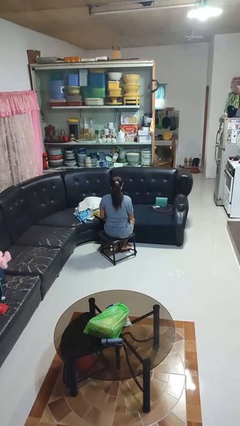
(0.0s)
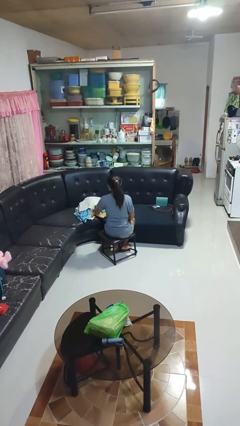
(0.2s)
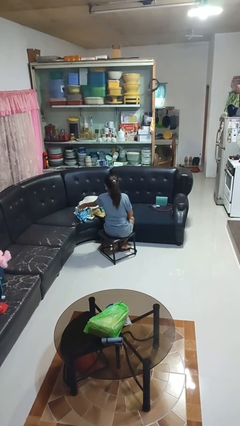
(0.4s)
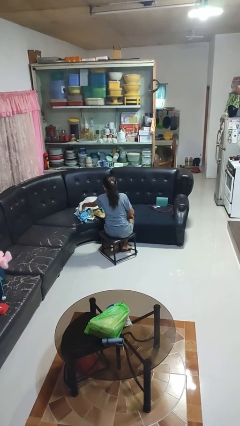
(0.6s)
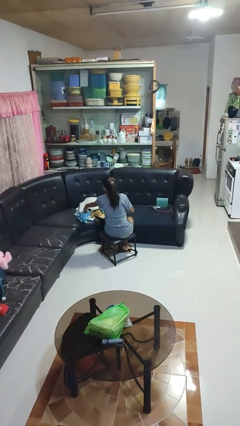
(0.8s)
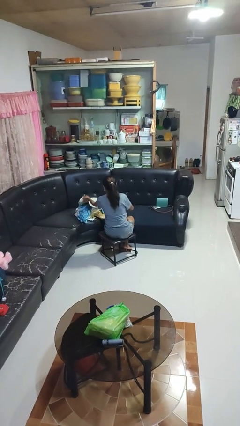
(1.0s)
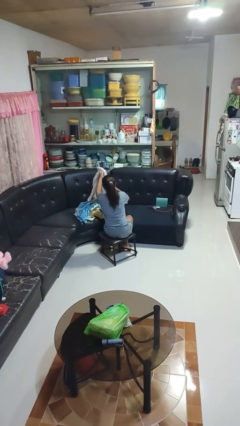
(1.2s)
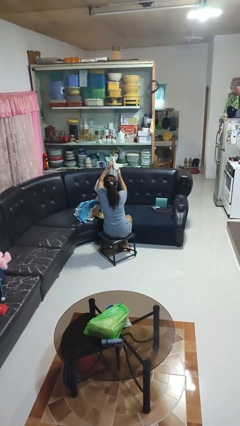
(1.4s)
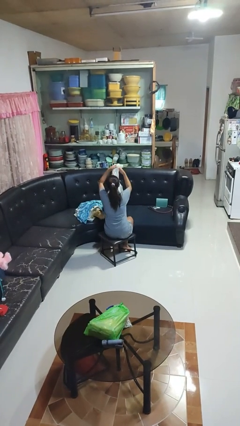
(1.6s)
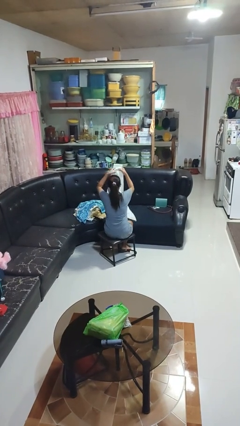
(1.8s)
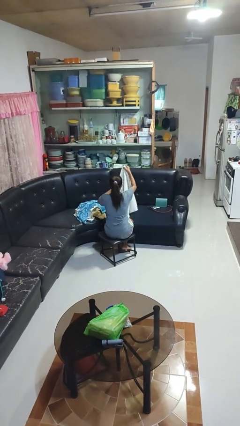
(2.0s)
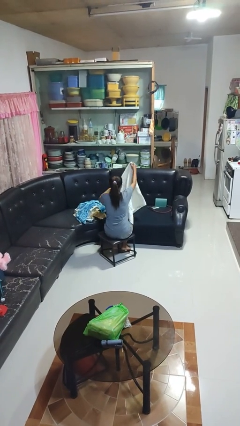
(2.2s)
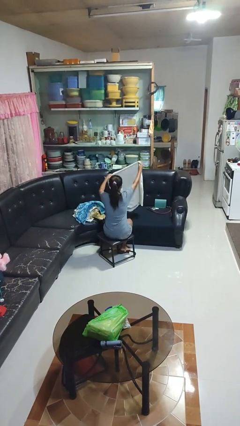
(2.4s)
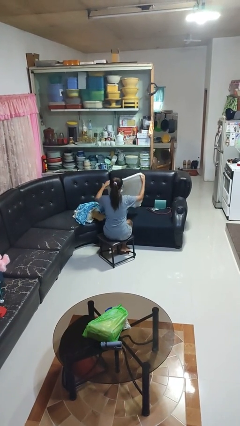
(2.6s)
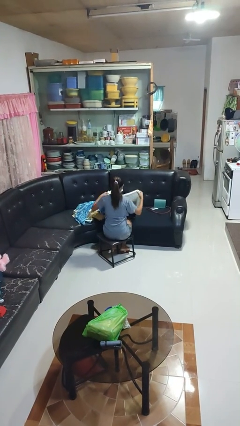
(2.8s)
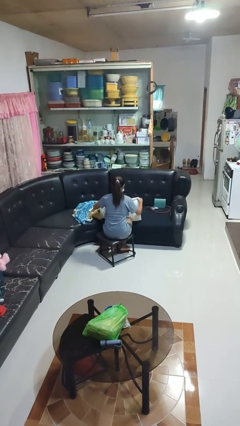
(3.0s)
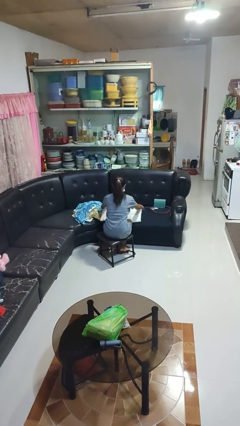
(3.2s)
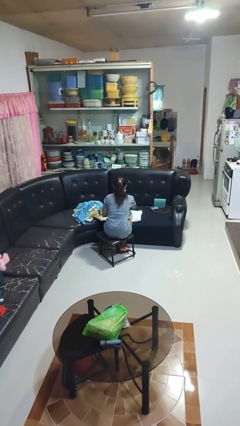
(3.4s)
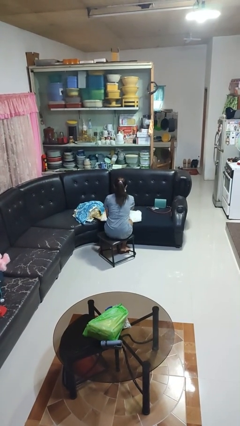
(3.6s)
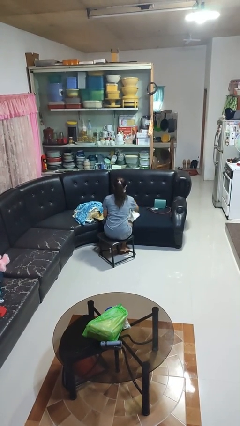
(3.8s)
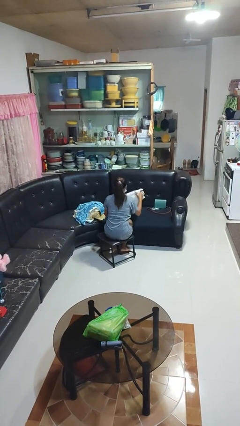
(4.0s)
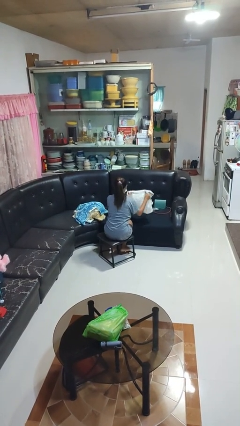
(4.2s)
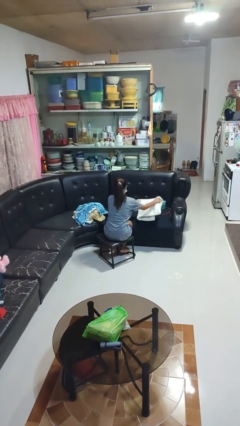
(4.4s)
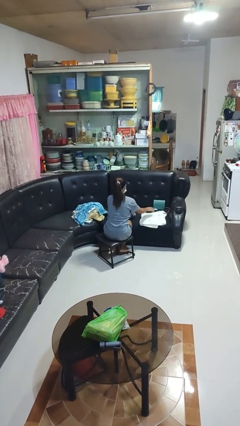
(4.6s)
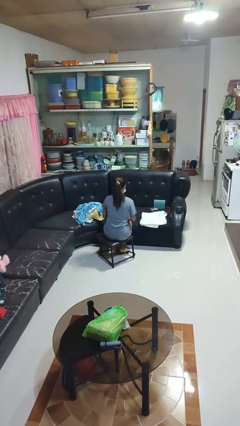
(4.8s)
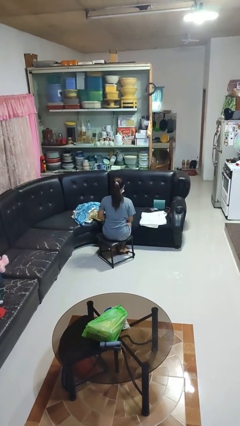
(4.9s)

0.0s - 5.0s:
person folds towel

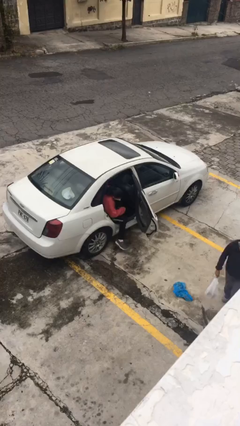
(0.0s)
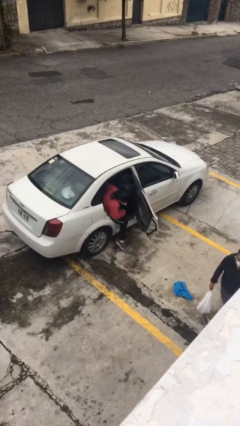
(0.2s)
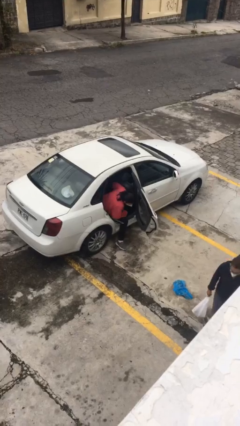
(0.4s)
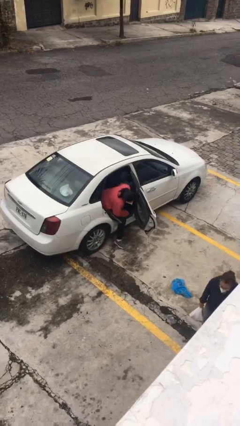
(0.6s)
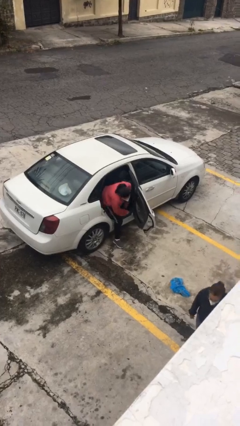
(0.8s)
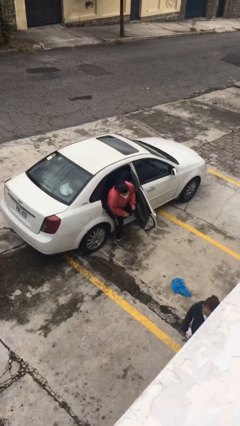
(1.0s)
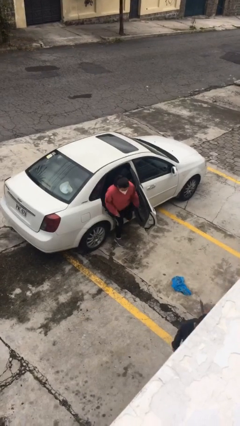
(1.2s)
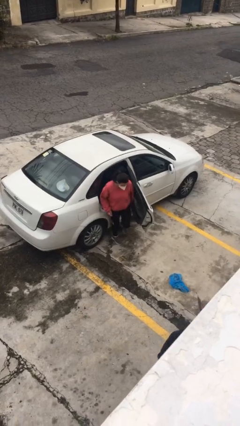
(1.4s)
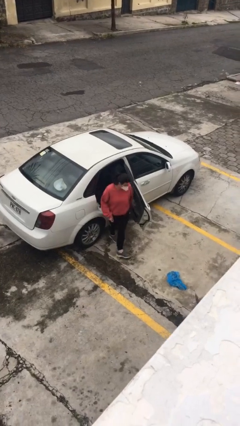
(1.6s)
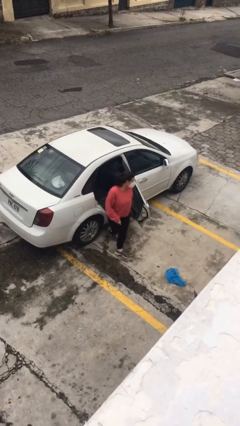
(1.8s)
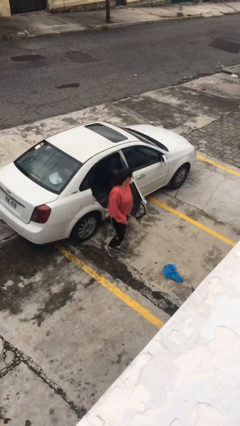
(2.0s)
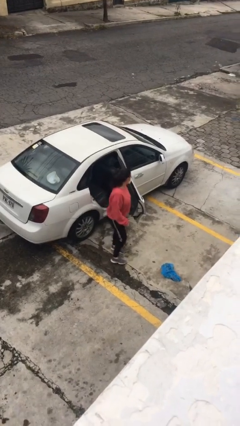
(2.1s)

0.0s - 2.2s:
person exits car

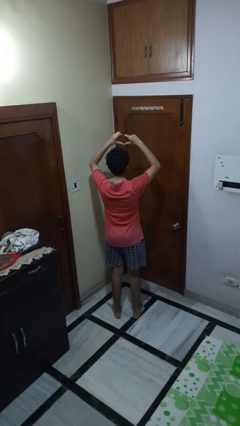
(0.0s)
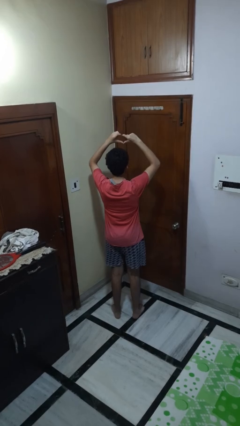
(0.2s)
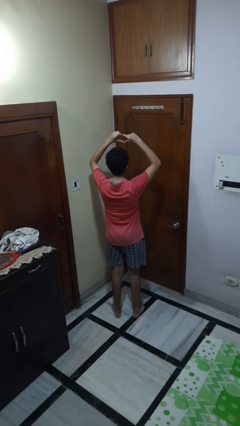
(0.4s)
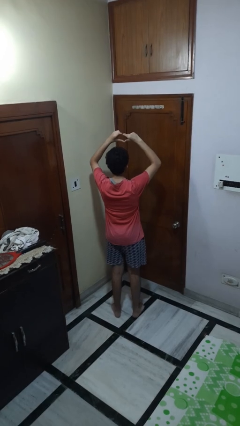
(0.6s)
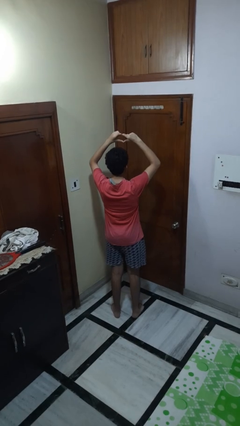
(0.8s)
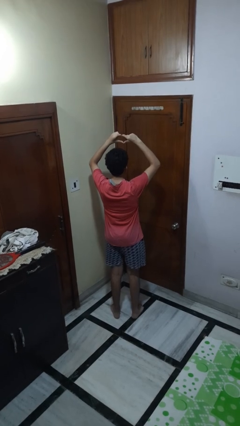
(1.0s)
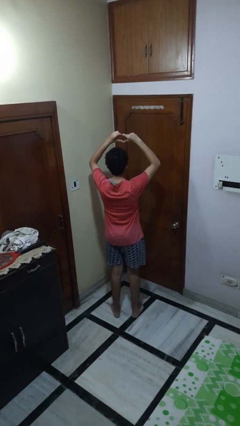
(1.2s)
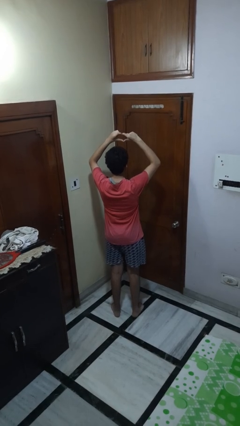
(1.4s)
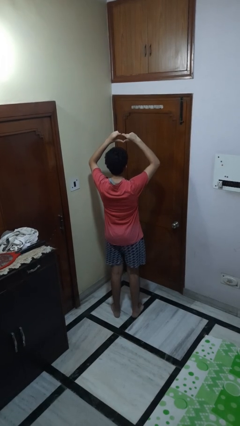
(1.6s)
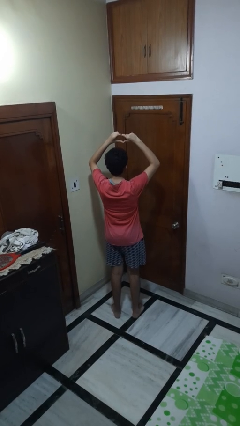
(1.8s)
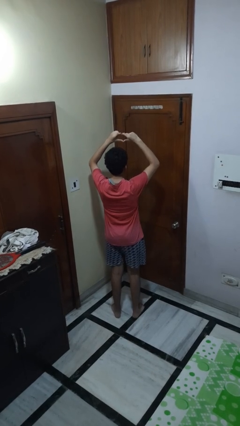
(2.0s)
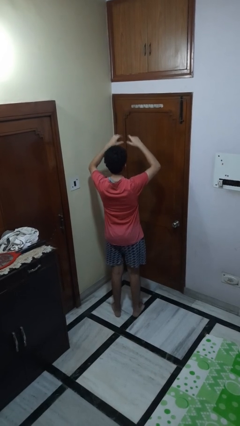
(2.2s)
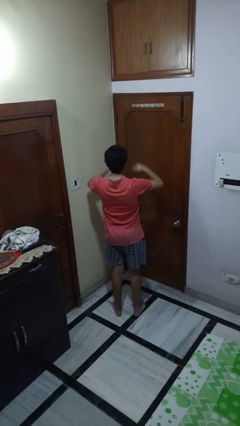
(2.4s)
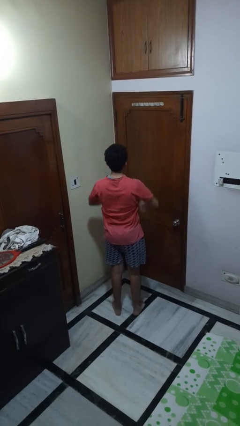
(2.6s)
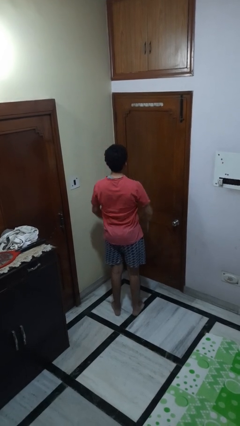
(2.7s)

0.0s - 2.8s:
person gestures heart

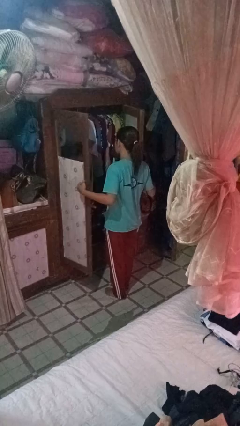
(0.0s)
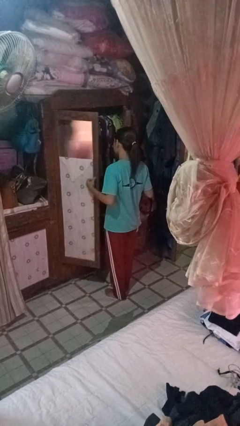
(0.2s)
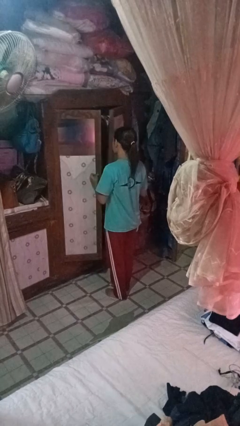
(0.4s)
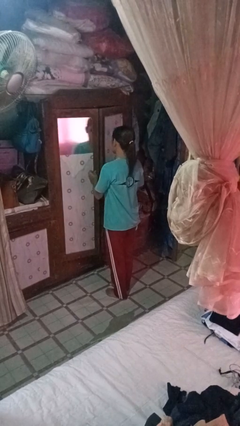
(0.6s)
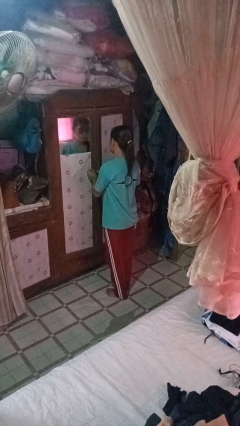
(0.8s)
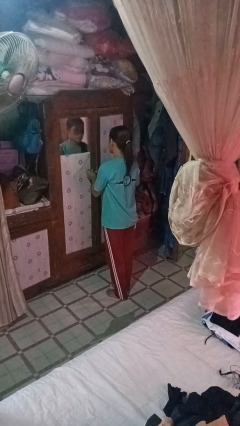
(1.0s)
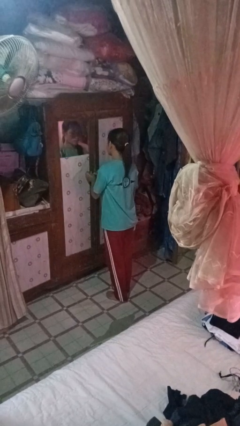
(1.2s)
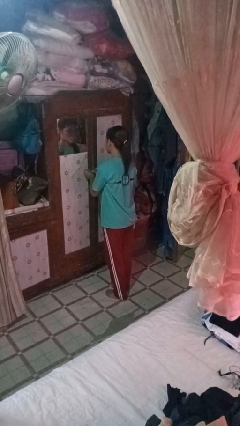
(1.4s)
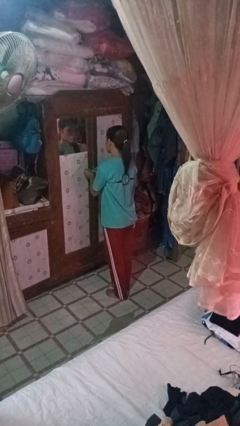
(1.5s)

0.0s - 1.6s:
person closes closet door

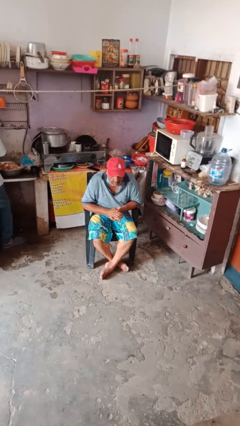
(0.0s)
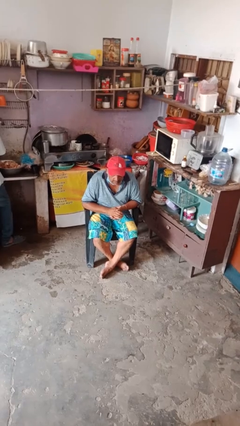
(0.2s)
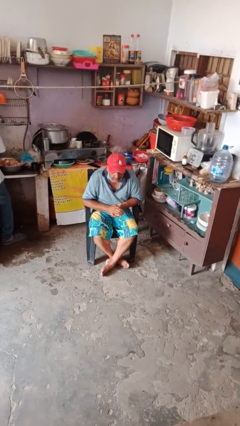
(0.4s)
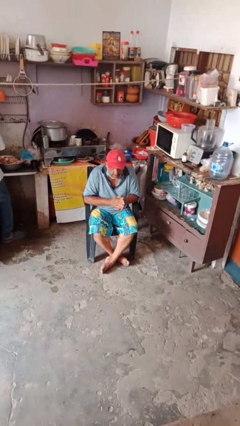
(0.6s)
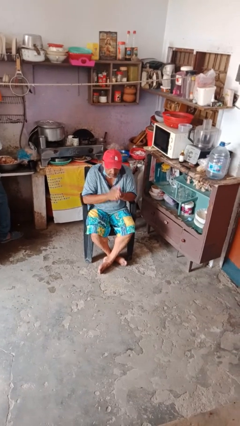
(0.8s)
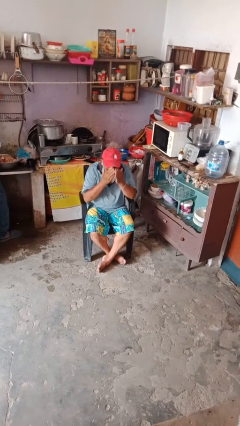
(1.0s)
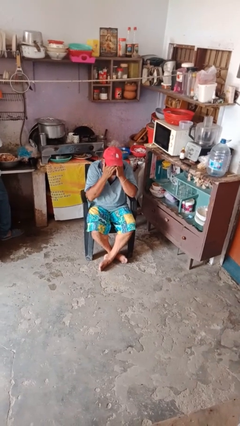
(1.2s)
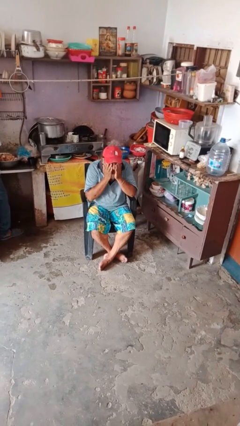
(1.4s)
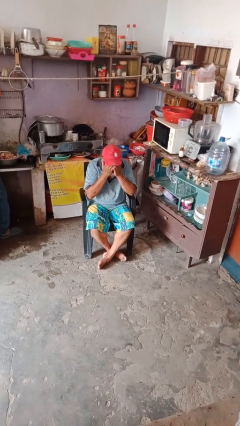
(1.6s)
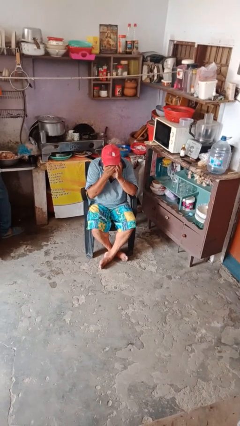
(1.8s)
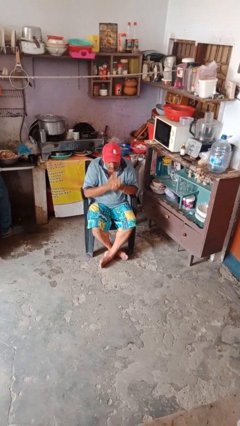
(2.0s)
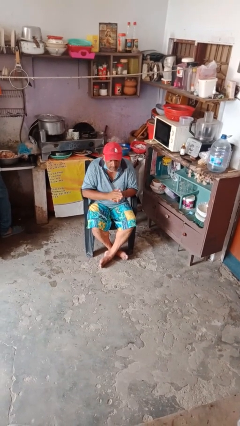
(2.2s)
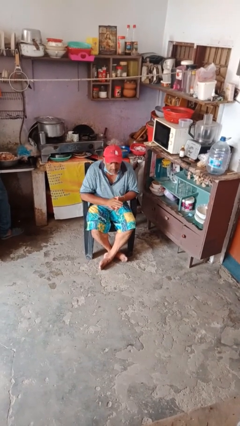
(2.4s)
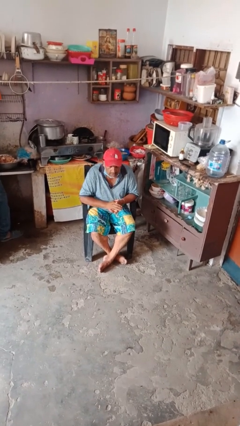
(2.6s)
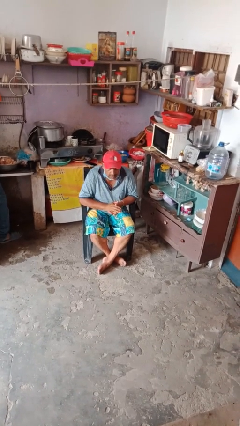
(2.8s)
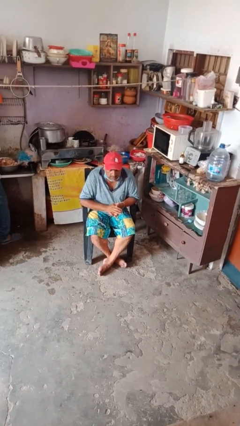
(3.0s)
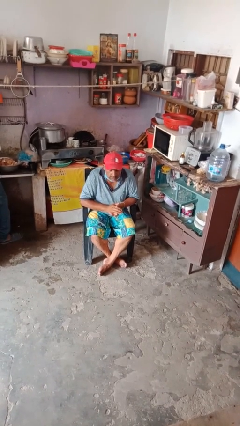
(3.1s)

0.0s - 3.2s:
person applies foundation makeup

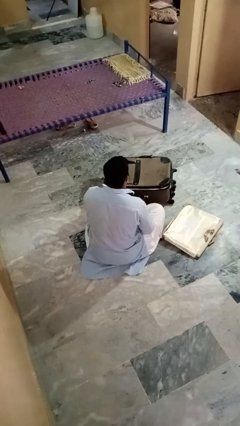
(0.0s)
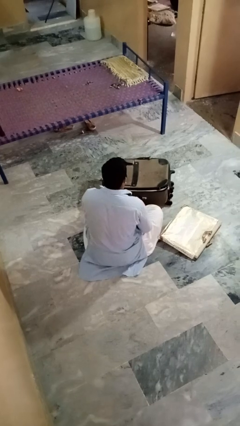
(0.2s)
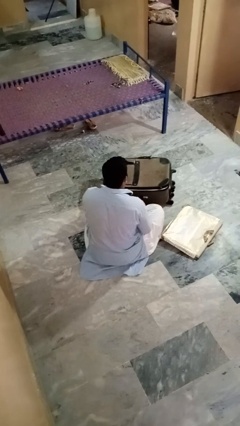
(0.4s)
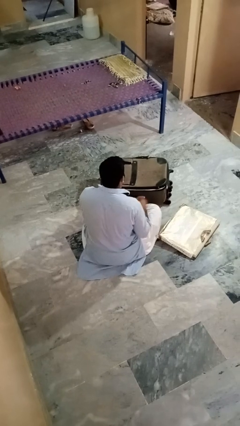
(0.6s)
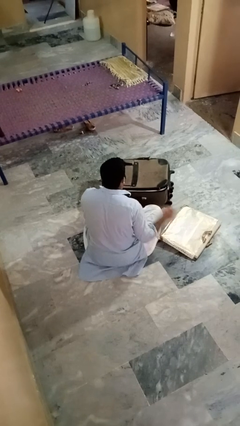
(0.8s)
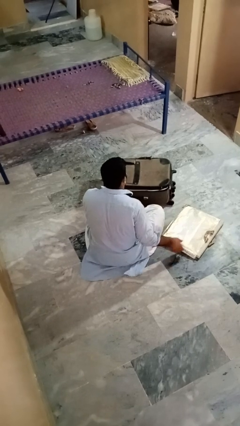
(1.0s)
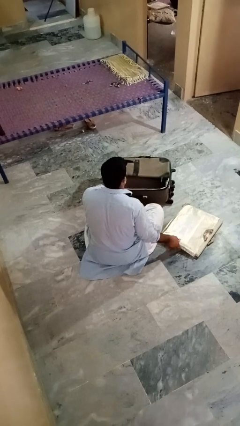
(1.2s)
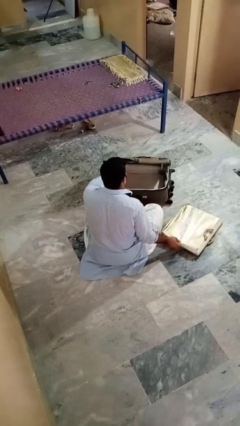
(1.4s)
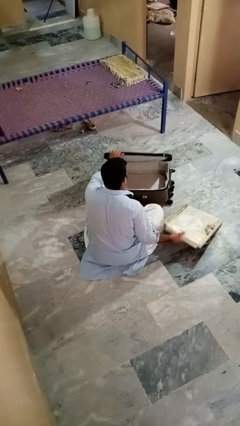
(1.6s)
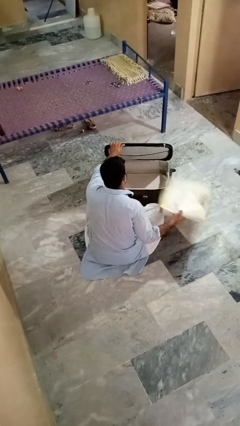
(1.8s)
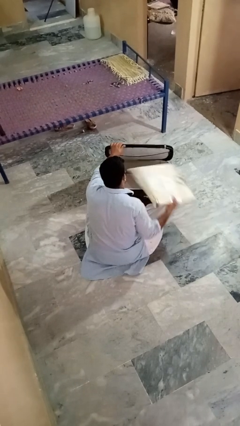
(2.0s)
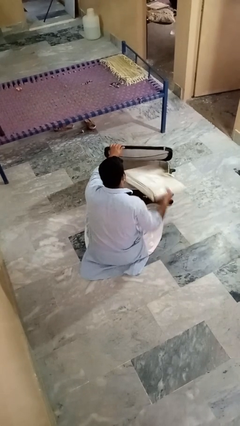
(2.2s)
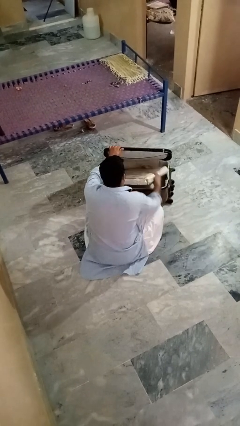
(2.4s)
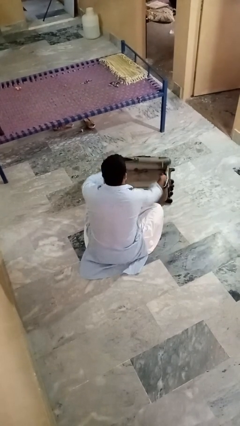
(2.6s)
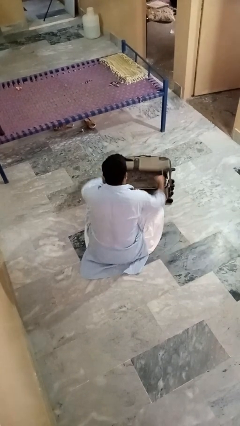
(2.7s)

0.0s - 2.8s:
person puts object into bag
